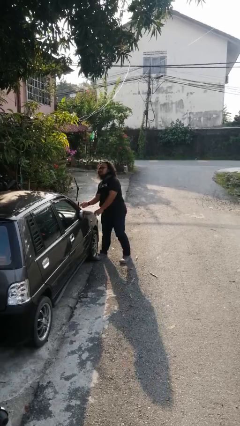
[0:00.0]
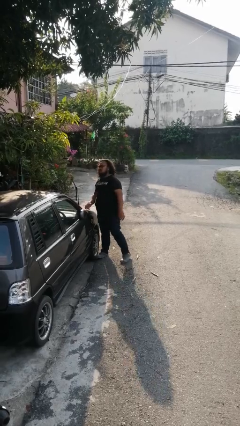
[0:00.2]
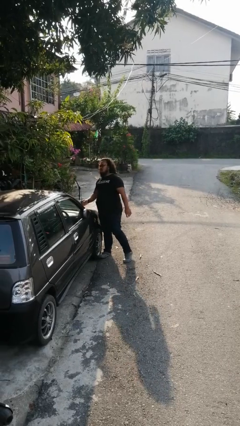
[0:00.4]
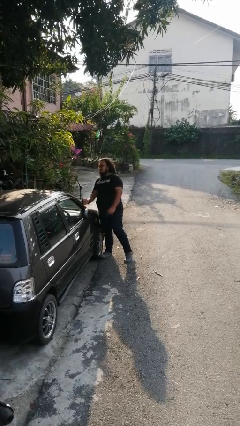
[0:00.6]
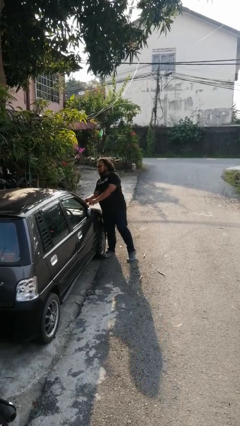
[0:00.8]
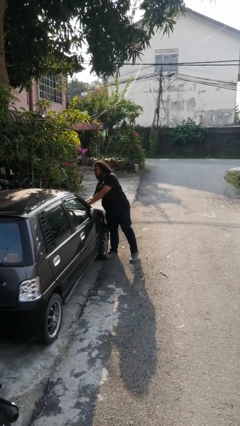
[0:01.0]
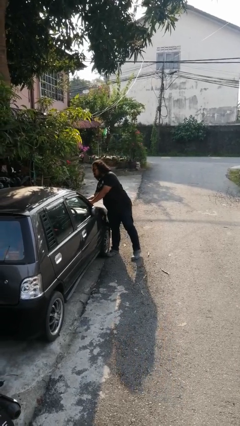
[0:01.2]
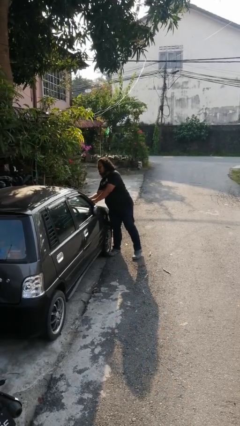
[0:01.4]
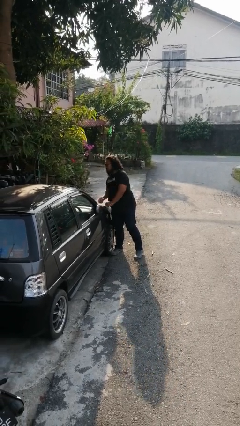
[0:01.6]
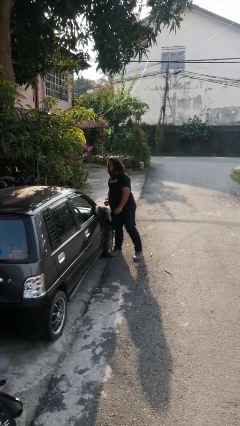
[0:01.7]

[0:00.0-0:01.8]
person flips down car wipers

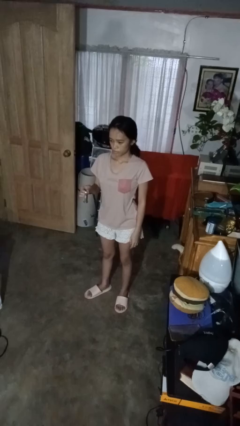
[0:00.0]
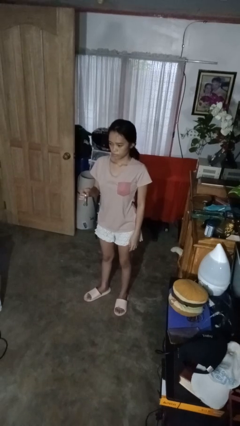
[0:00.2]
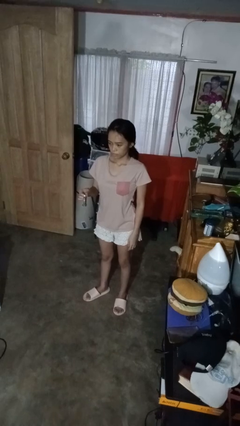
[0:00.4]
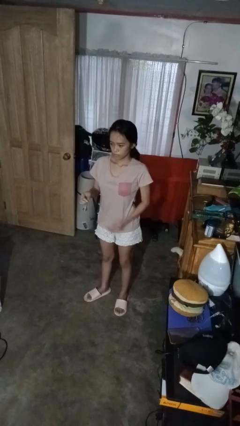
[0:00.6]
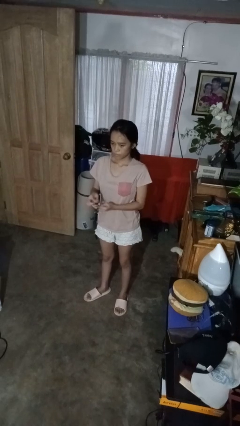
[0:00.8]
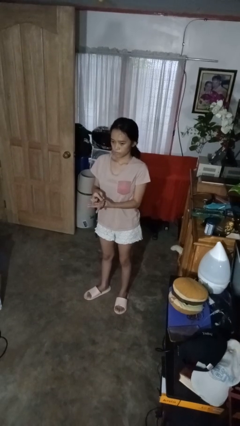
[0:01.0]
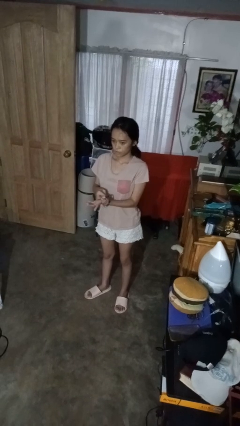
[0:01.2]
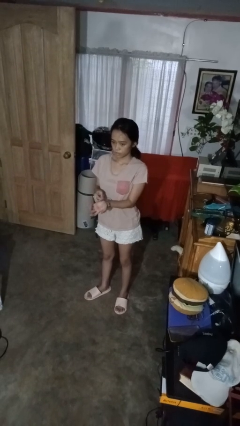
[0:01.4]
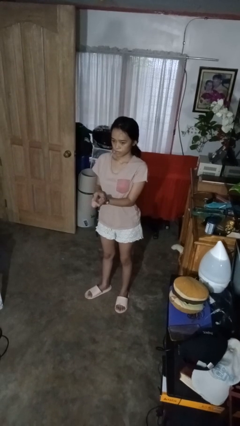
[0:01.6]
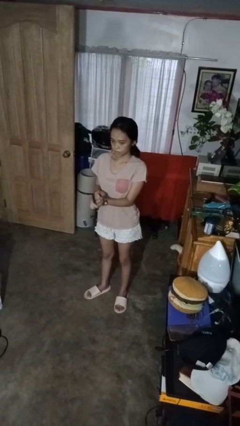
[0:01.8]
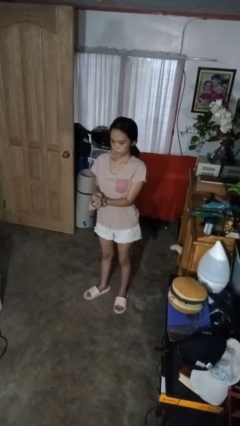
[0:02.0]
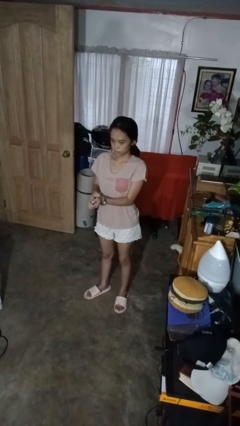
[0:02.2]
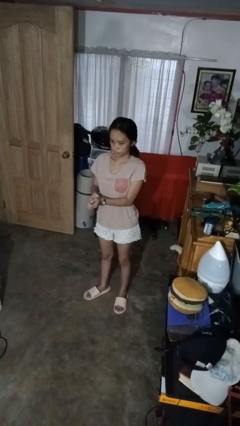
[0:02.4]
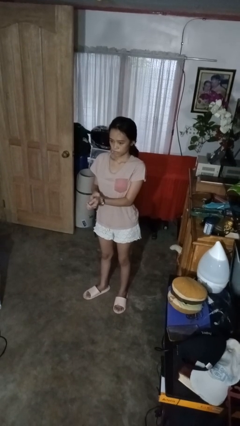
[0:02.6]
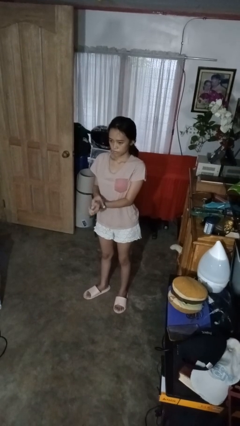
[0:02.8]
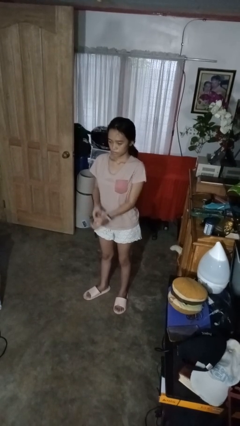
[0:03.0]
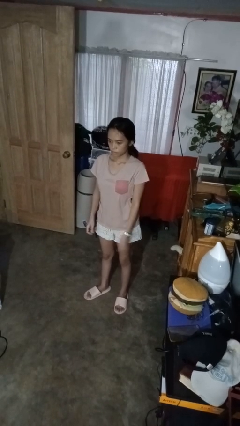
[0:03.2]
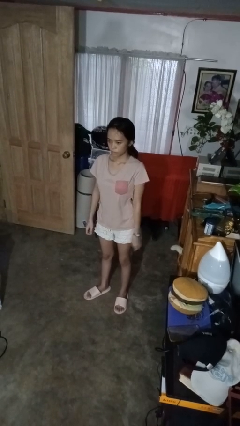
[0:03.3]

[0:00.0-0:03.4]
person puts on wristwatch

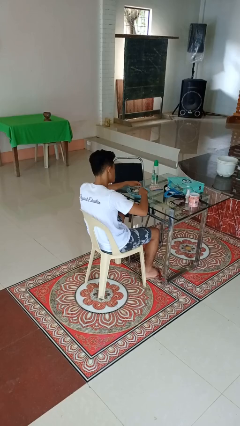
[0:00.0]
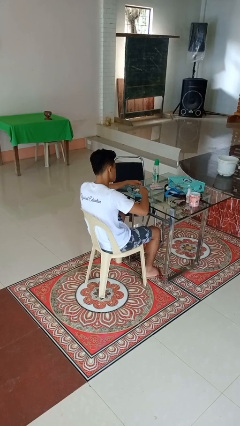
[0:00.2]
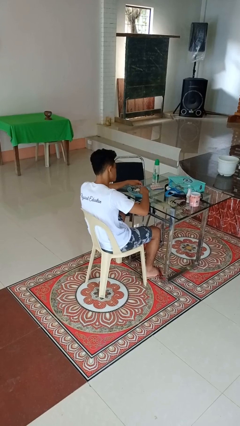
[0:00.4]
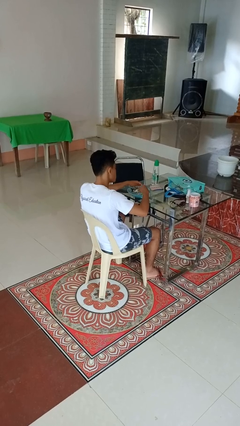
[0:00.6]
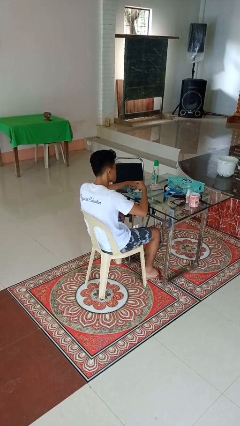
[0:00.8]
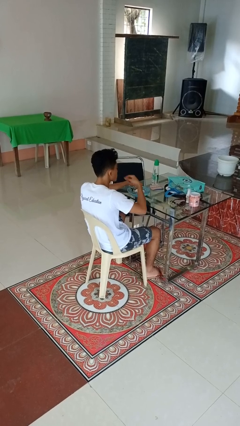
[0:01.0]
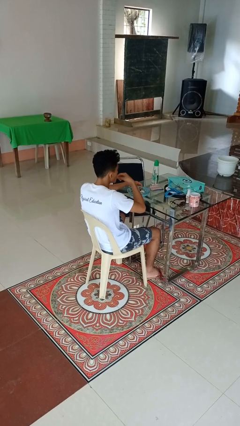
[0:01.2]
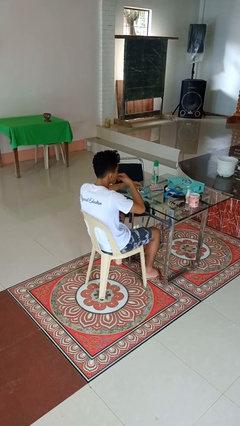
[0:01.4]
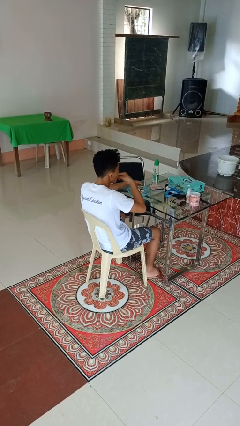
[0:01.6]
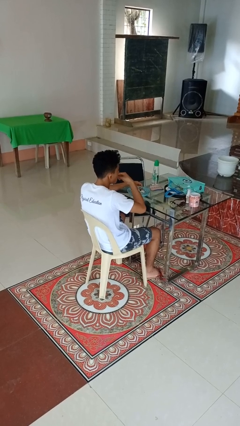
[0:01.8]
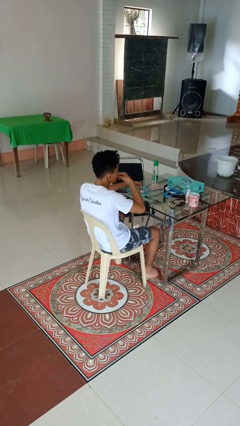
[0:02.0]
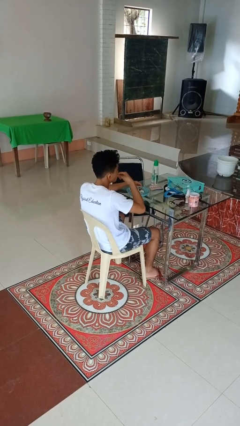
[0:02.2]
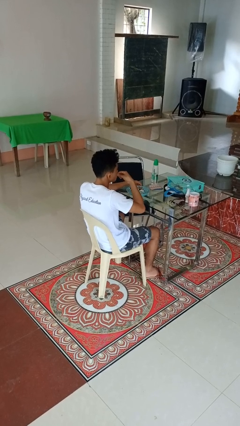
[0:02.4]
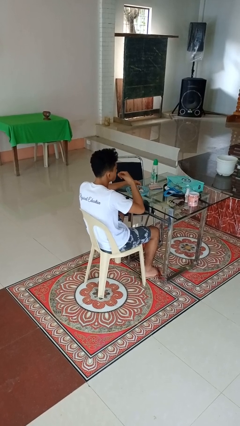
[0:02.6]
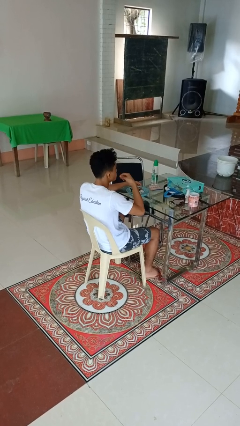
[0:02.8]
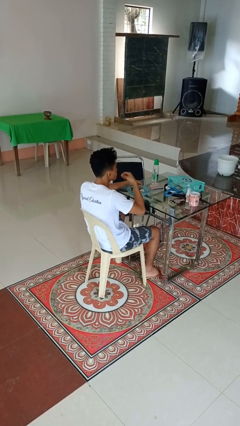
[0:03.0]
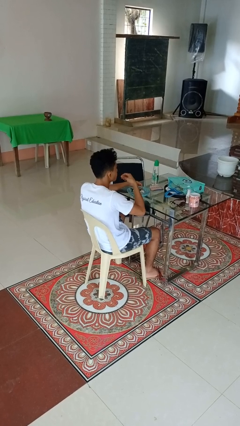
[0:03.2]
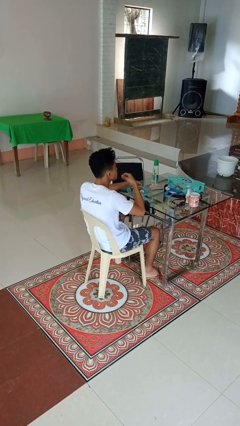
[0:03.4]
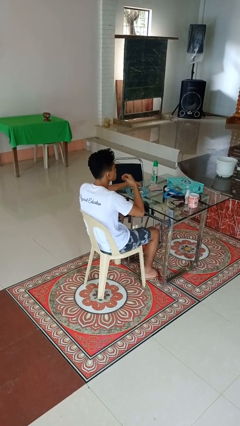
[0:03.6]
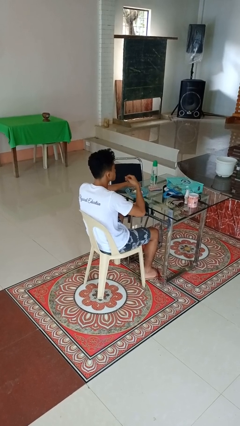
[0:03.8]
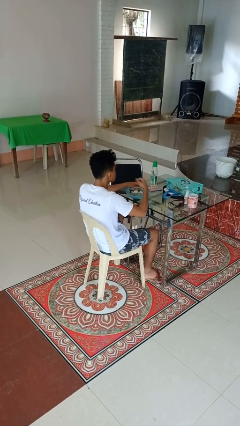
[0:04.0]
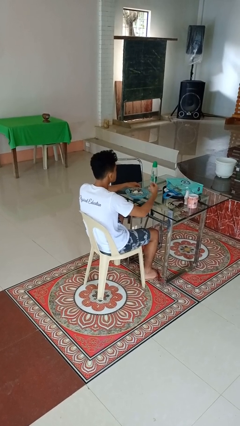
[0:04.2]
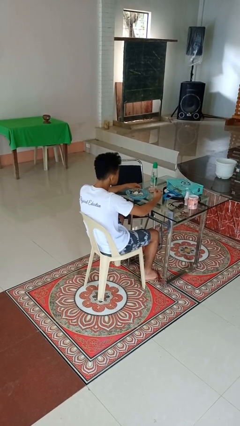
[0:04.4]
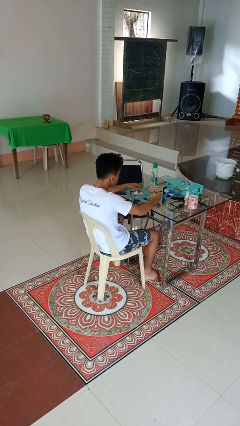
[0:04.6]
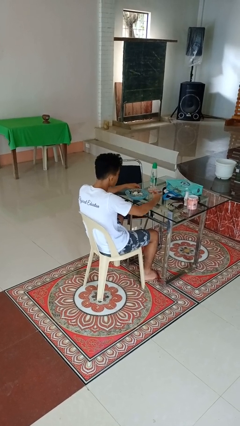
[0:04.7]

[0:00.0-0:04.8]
person eats with hands

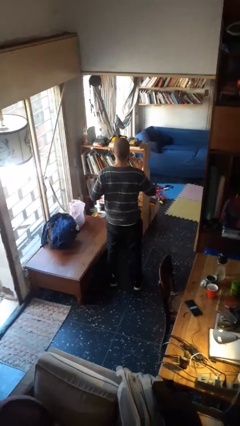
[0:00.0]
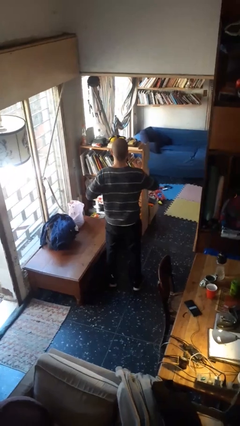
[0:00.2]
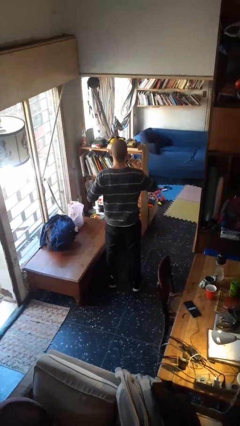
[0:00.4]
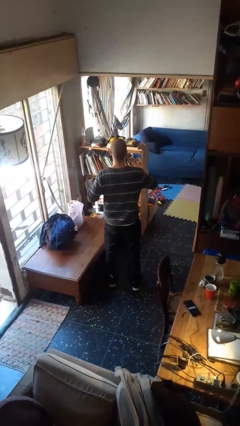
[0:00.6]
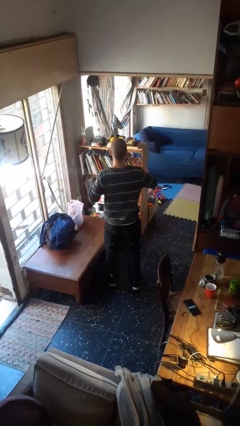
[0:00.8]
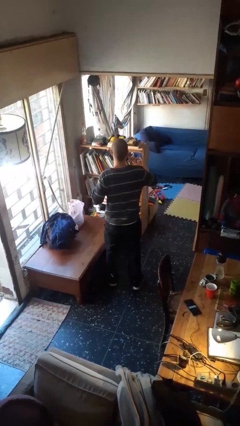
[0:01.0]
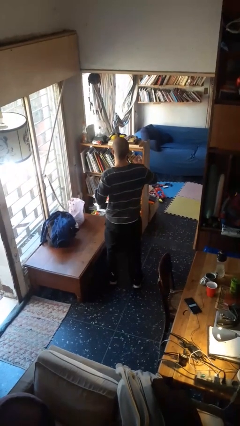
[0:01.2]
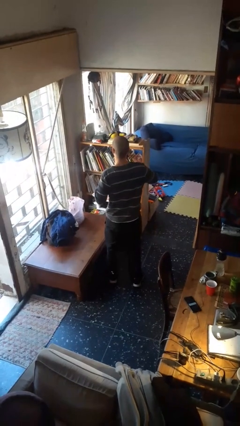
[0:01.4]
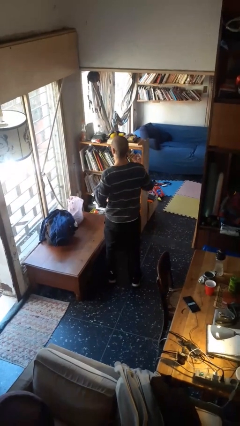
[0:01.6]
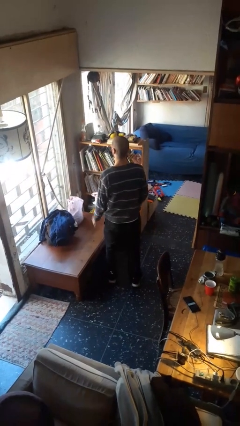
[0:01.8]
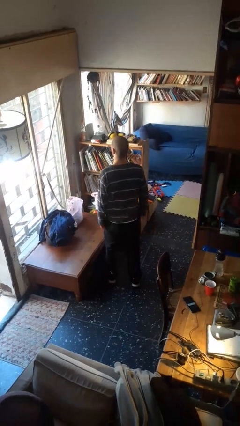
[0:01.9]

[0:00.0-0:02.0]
person drums on chest

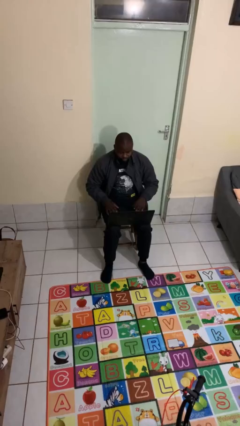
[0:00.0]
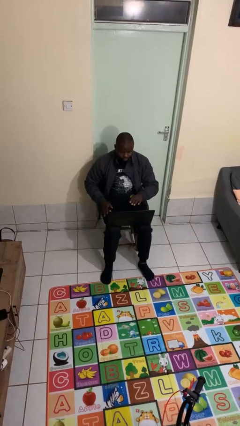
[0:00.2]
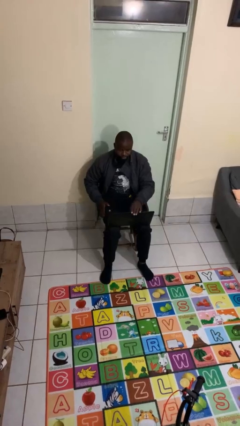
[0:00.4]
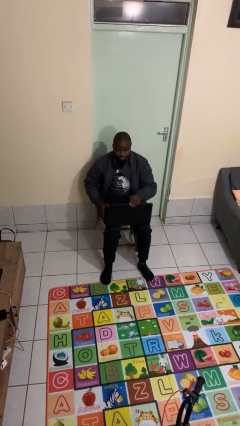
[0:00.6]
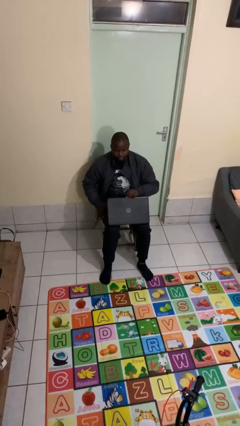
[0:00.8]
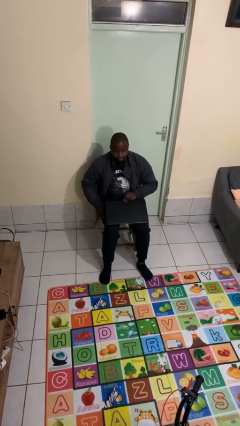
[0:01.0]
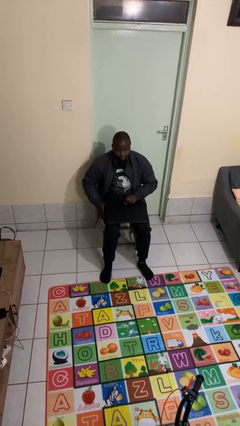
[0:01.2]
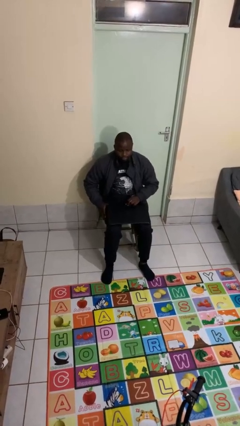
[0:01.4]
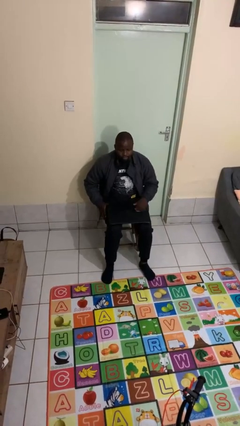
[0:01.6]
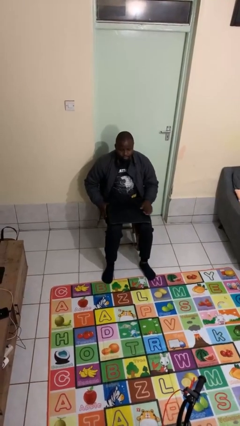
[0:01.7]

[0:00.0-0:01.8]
person closes laptop

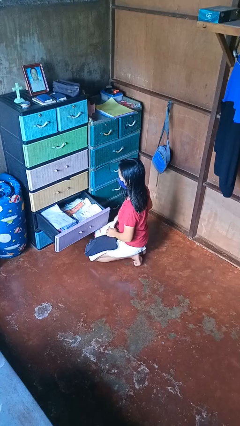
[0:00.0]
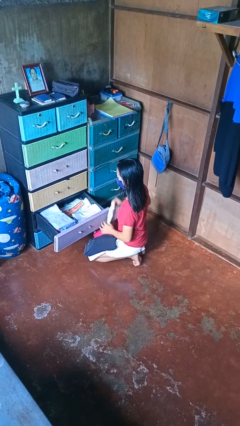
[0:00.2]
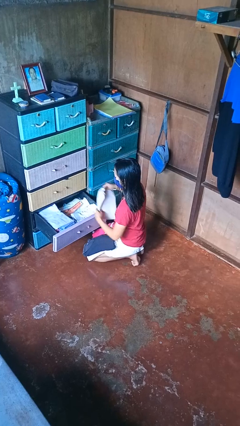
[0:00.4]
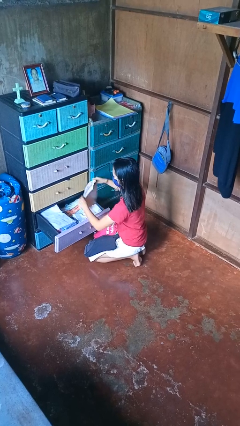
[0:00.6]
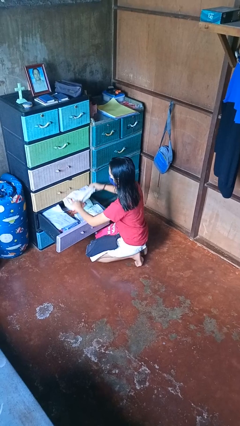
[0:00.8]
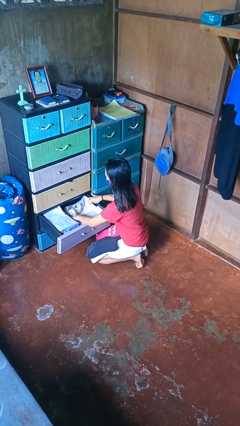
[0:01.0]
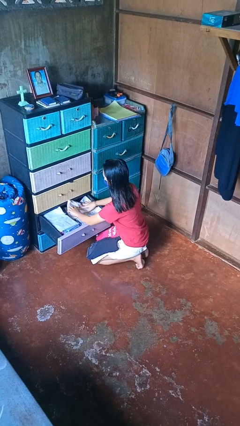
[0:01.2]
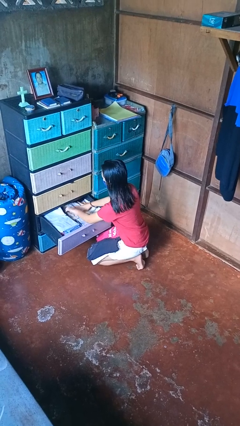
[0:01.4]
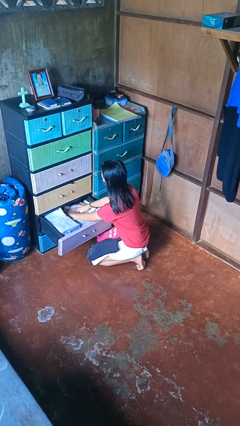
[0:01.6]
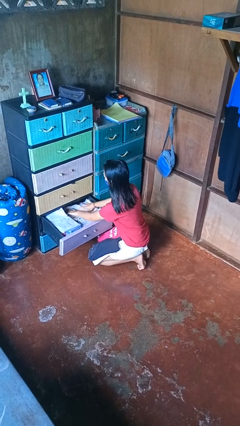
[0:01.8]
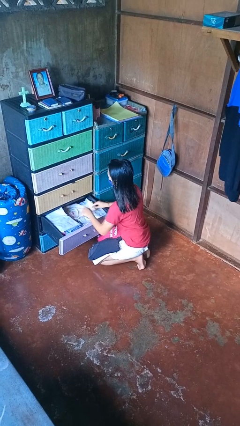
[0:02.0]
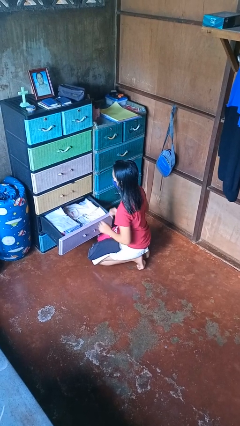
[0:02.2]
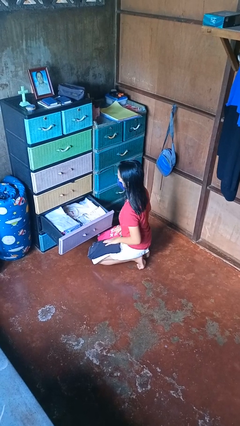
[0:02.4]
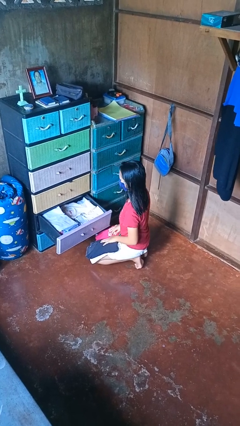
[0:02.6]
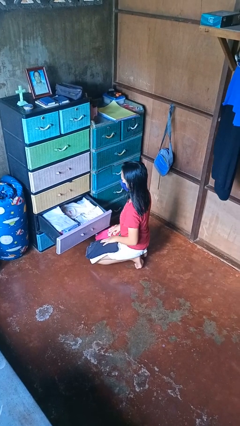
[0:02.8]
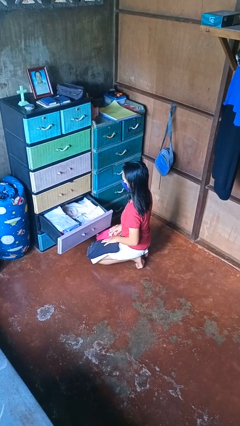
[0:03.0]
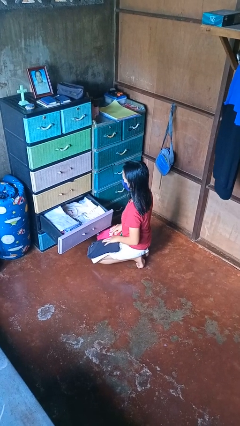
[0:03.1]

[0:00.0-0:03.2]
person puts clothes into dresser
